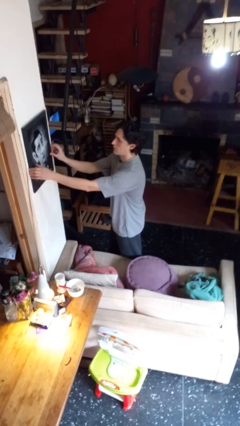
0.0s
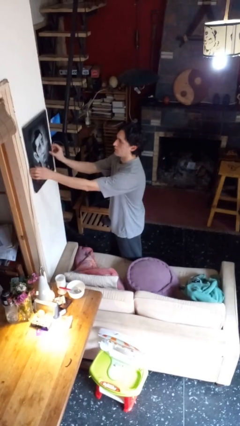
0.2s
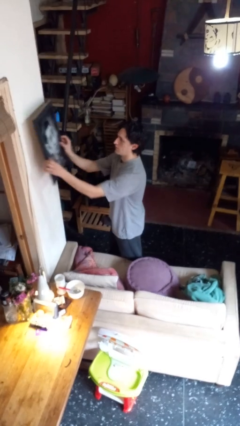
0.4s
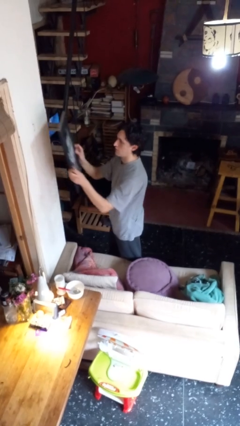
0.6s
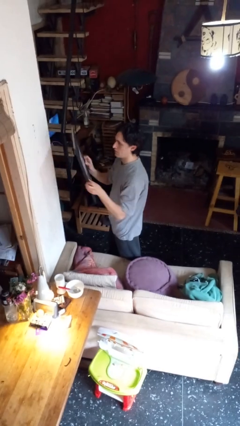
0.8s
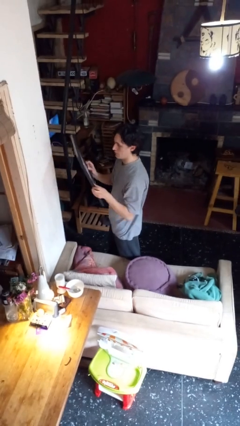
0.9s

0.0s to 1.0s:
person takes down picture frame

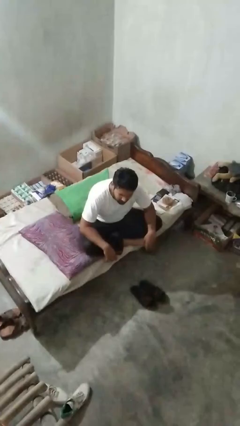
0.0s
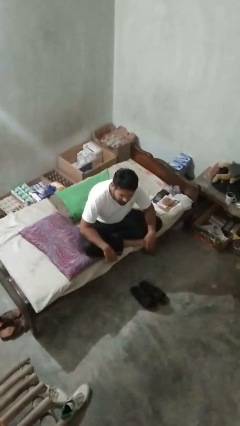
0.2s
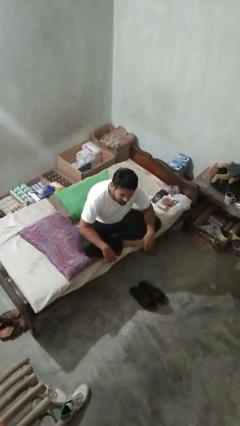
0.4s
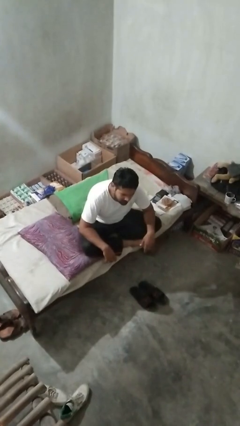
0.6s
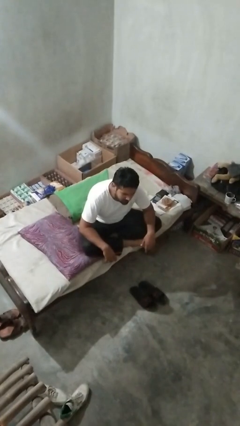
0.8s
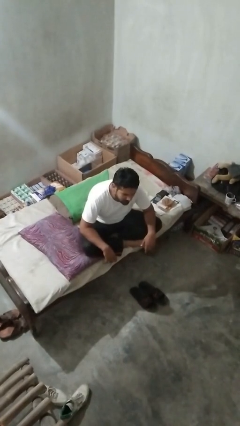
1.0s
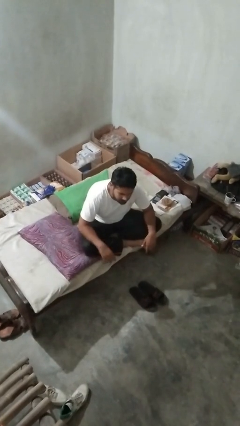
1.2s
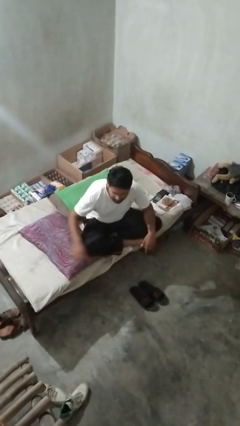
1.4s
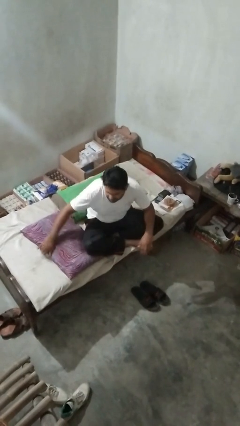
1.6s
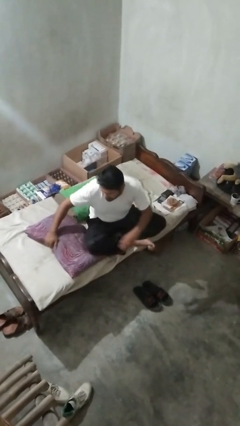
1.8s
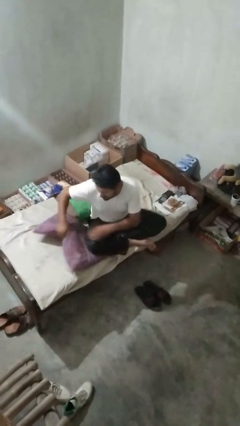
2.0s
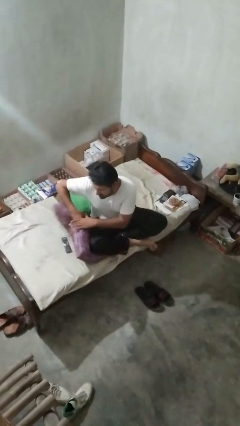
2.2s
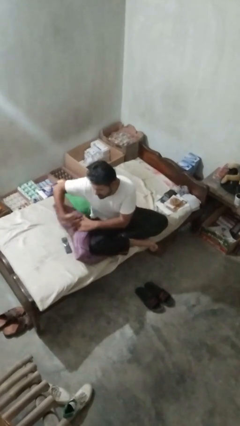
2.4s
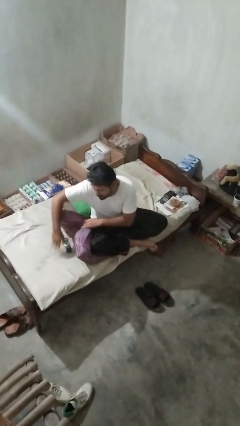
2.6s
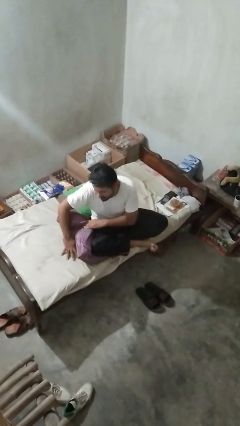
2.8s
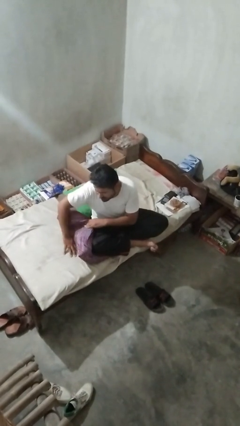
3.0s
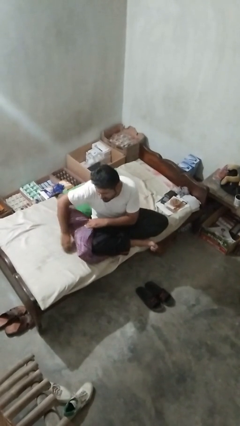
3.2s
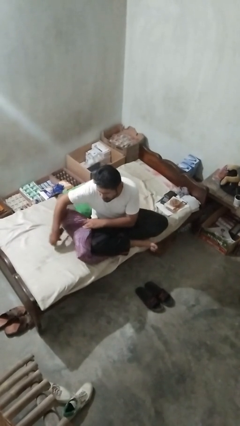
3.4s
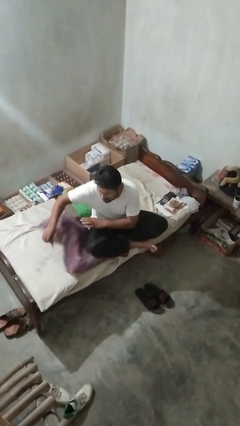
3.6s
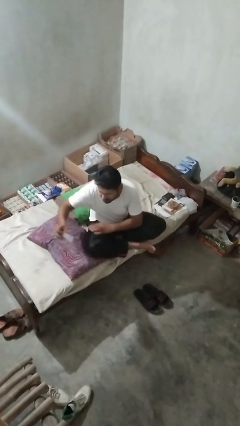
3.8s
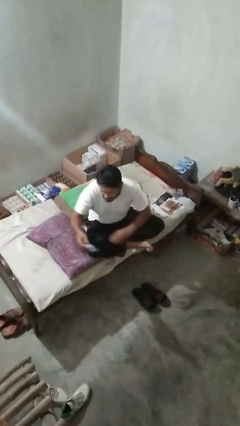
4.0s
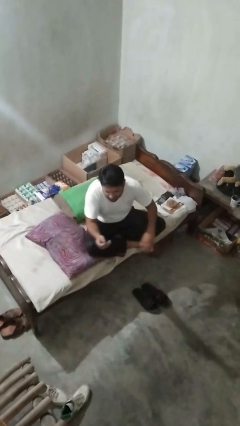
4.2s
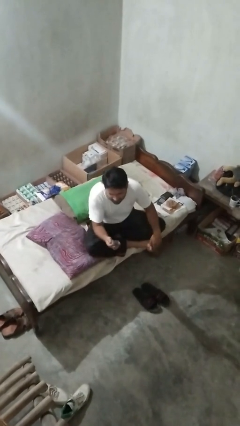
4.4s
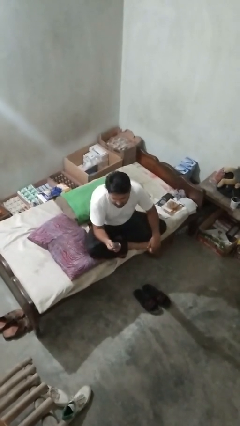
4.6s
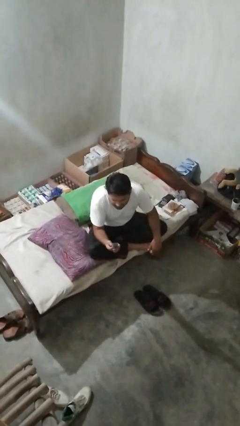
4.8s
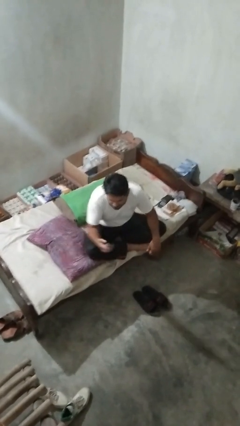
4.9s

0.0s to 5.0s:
person searches in couch

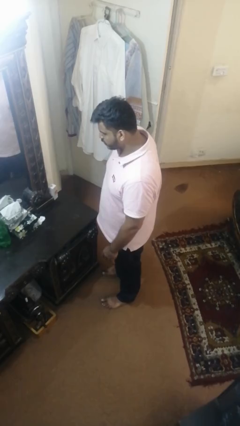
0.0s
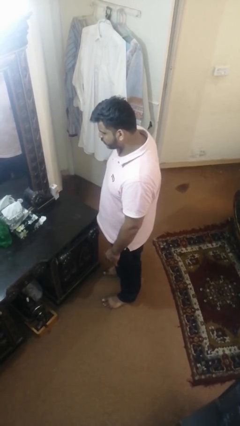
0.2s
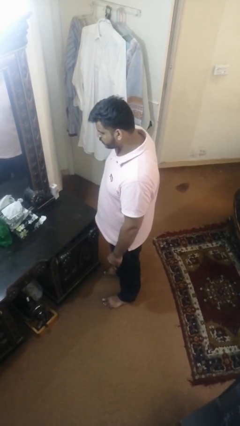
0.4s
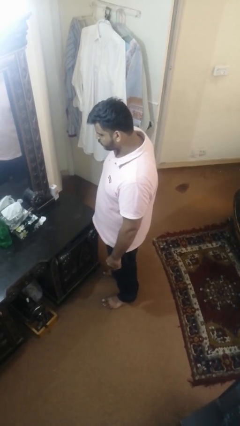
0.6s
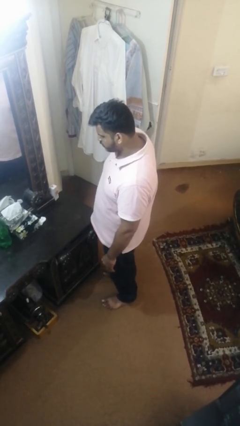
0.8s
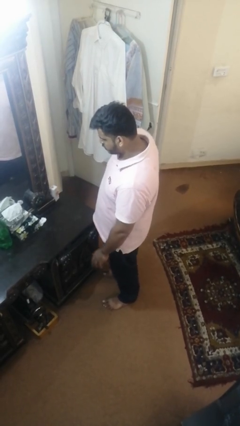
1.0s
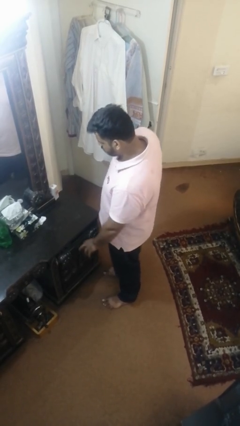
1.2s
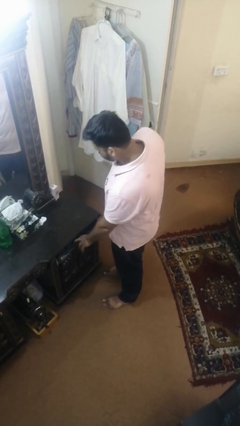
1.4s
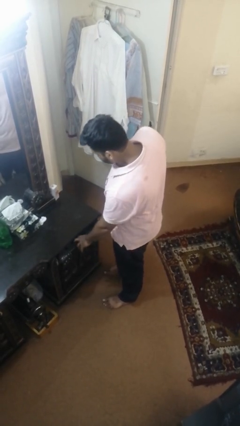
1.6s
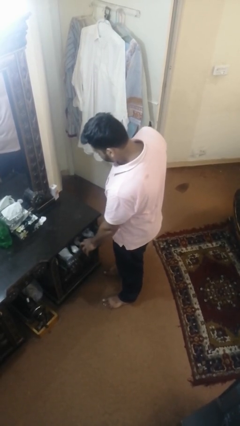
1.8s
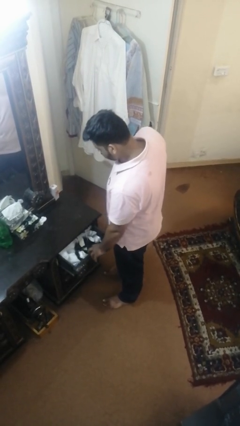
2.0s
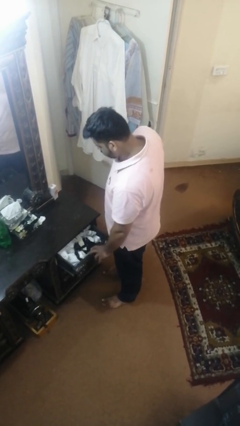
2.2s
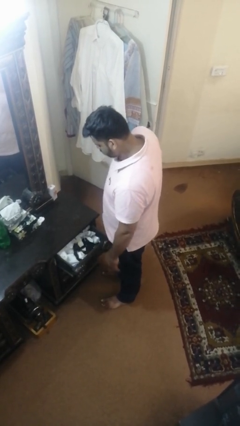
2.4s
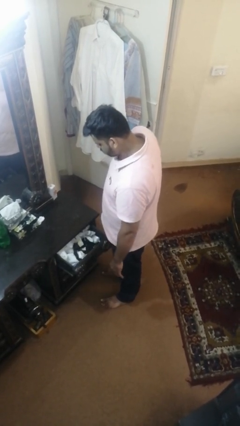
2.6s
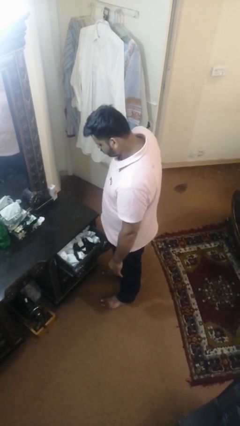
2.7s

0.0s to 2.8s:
person opens dresser drawer

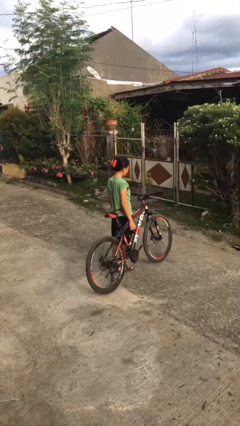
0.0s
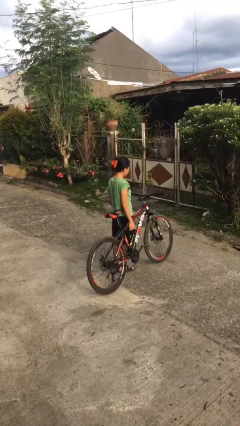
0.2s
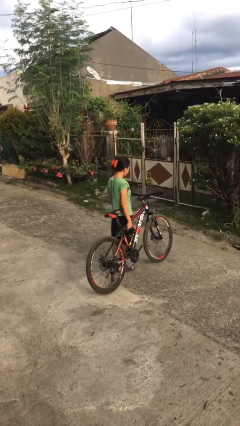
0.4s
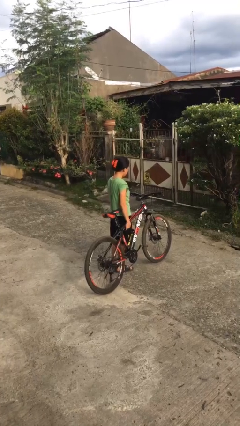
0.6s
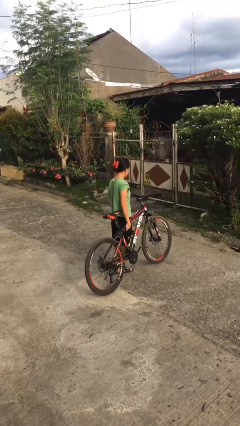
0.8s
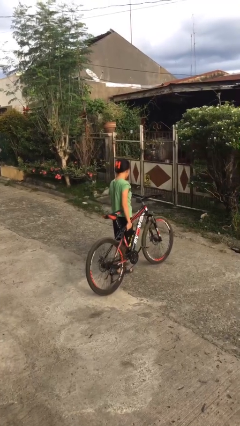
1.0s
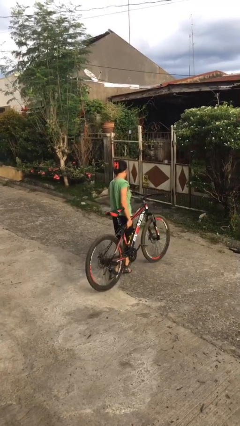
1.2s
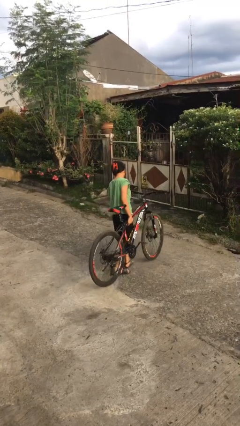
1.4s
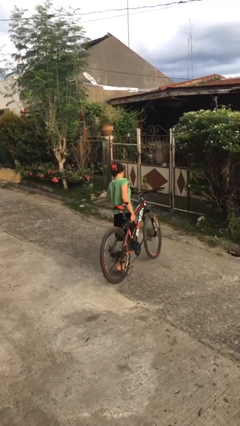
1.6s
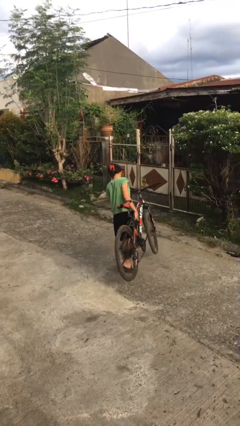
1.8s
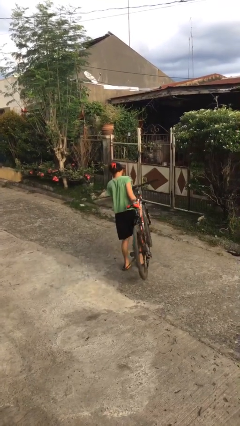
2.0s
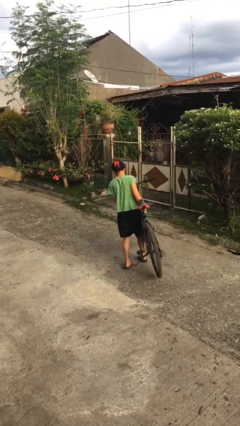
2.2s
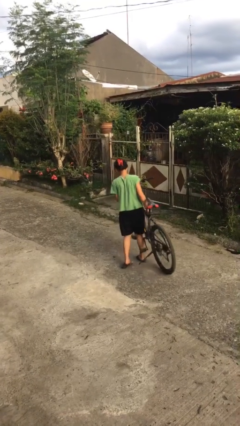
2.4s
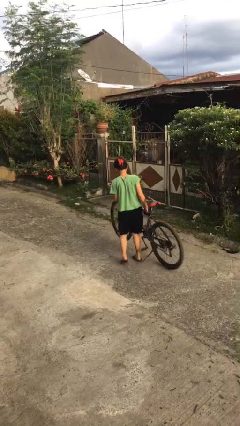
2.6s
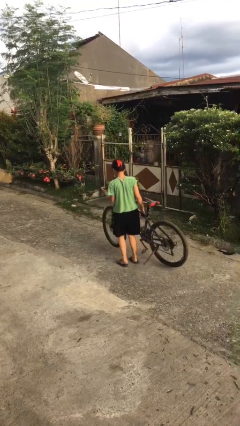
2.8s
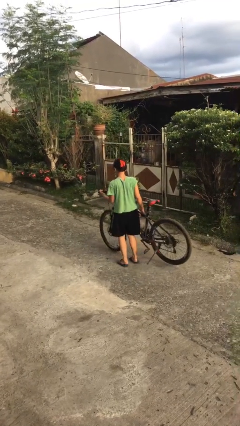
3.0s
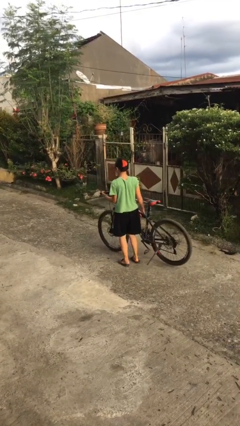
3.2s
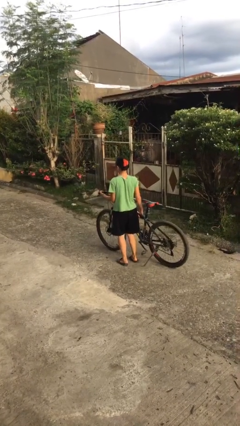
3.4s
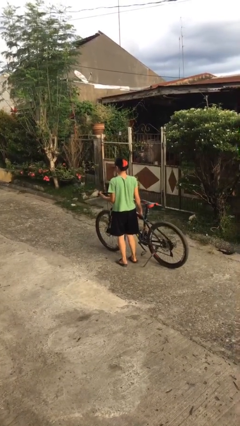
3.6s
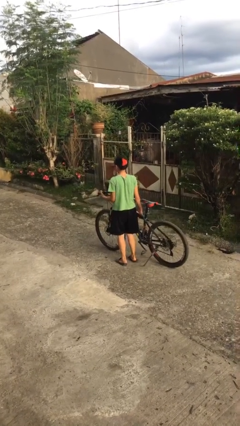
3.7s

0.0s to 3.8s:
person carries bicycle

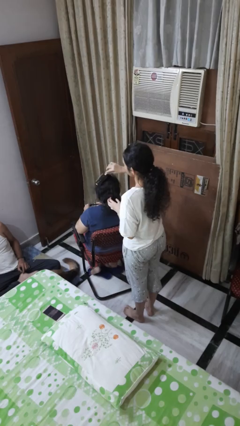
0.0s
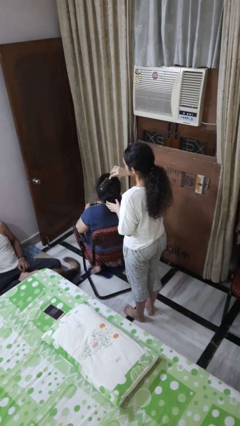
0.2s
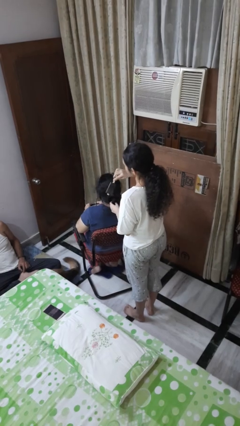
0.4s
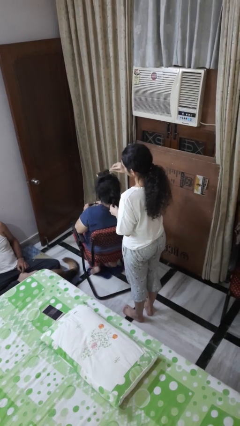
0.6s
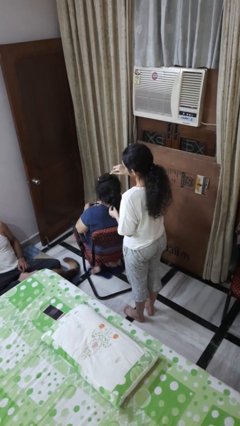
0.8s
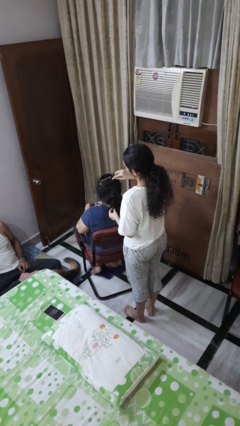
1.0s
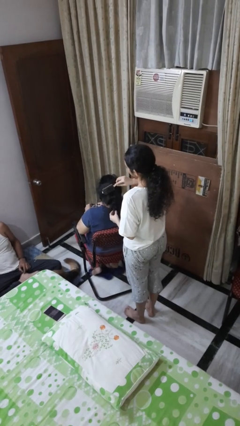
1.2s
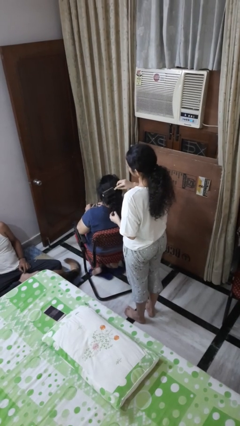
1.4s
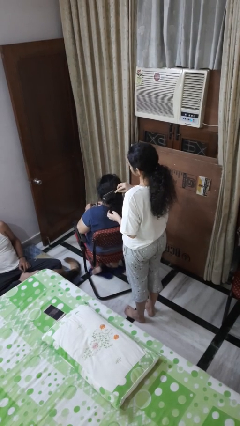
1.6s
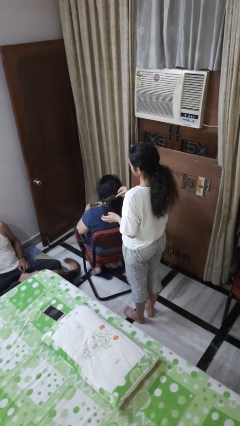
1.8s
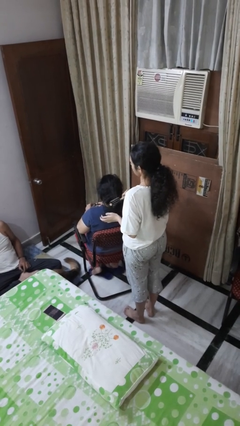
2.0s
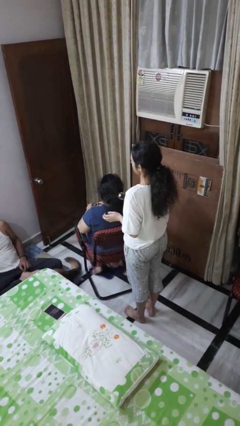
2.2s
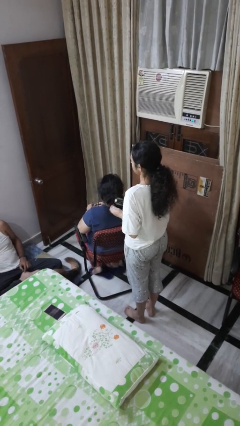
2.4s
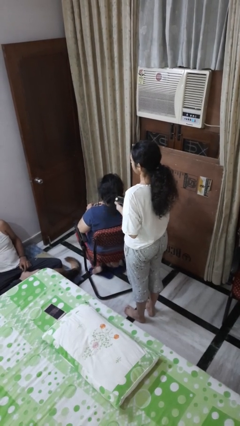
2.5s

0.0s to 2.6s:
person brushes hair of person

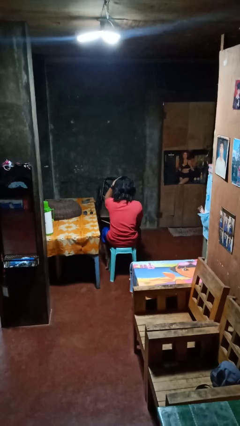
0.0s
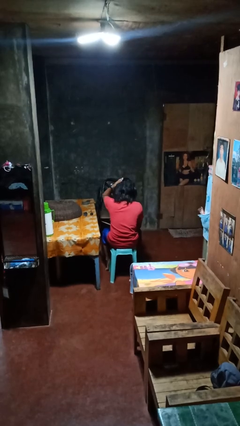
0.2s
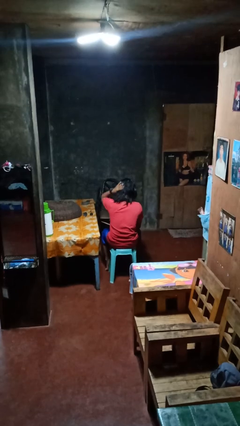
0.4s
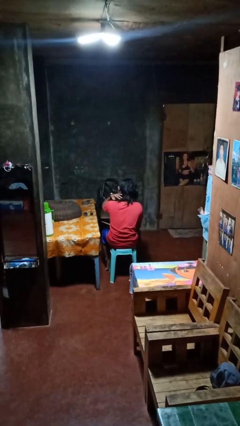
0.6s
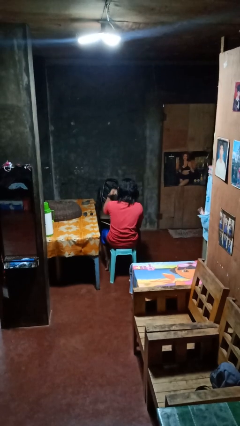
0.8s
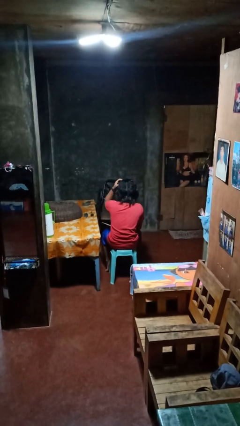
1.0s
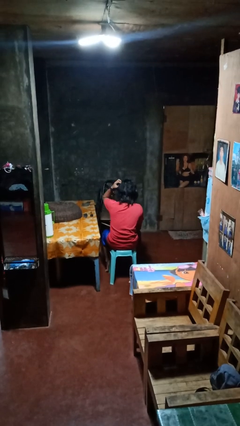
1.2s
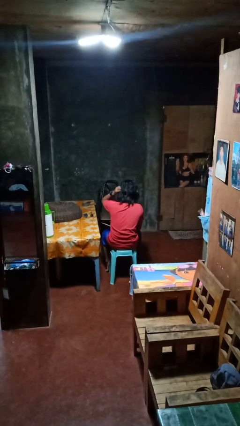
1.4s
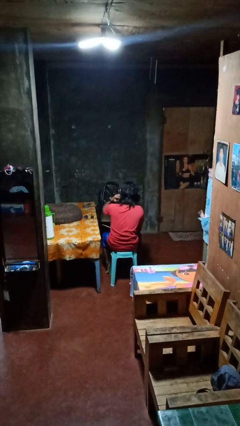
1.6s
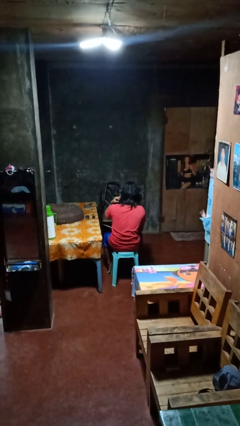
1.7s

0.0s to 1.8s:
person strokes hair

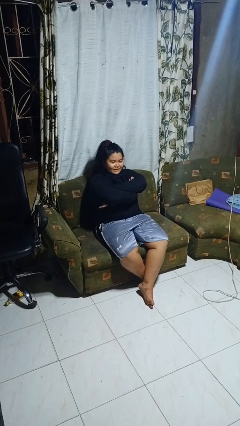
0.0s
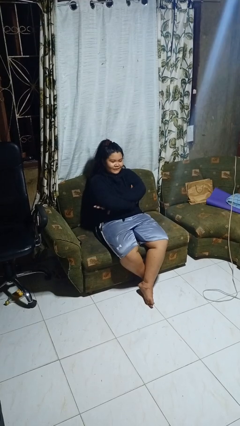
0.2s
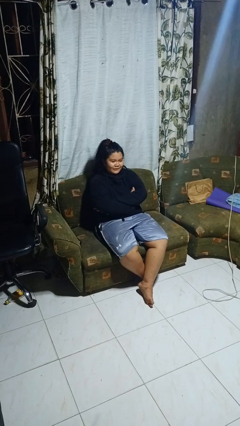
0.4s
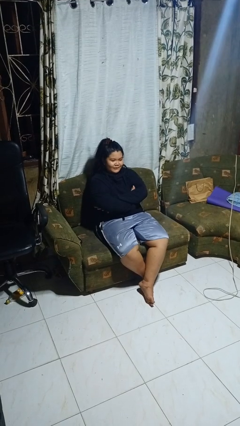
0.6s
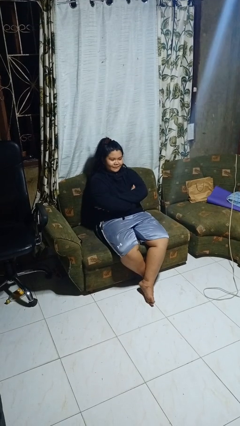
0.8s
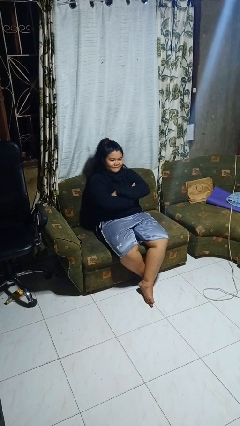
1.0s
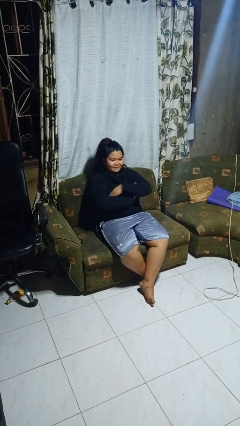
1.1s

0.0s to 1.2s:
person crosses arms
